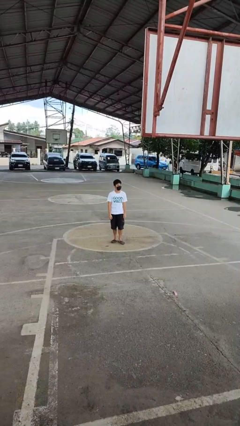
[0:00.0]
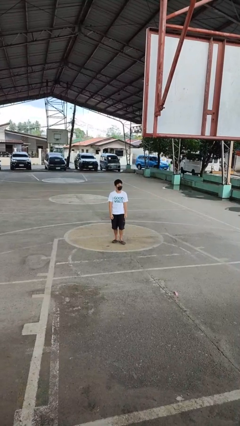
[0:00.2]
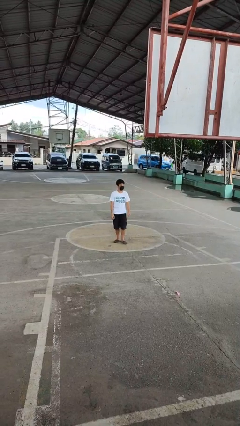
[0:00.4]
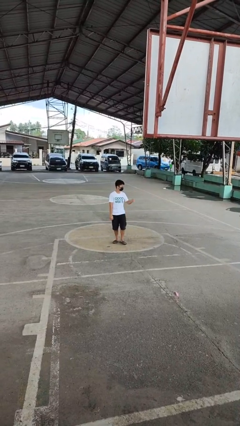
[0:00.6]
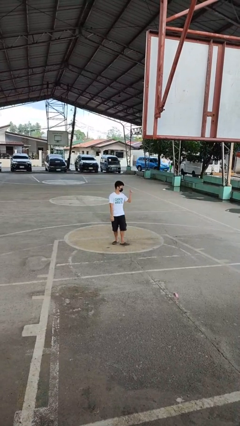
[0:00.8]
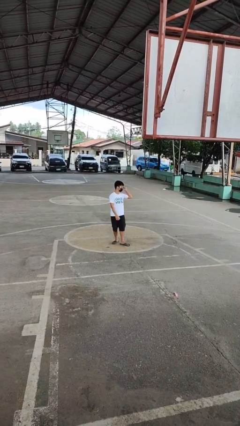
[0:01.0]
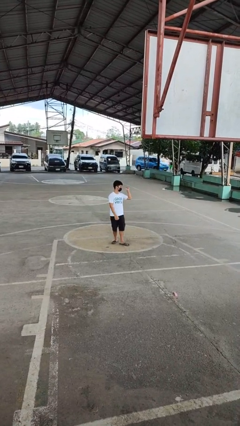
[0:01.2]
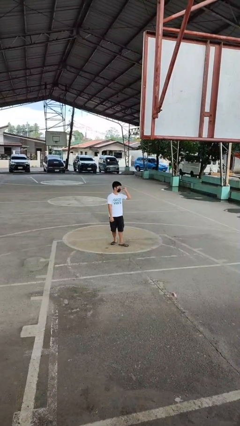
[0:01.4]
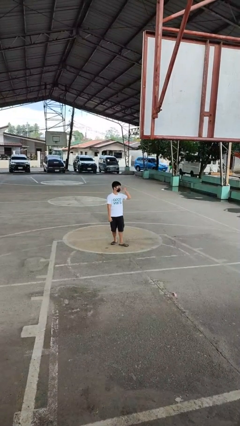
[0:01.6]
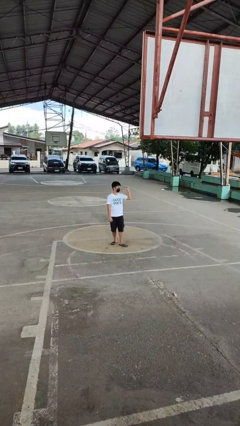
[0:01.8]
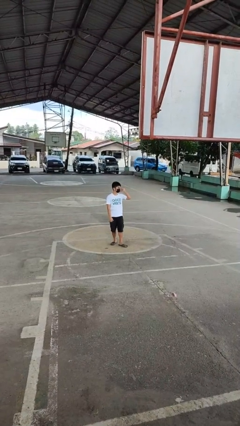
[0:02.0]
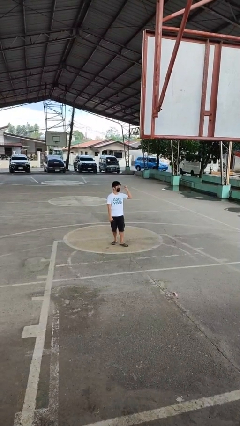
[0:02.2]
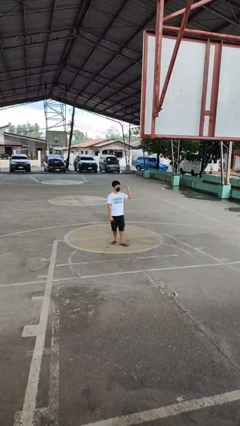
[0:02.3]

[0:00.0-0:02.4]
person gestures behind me

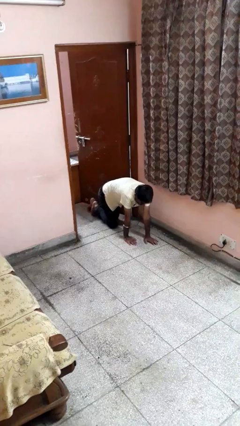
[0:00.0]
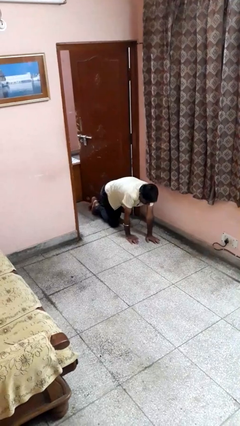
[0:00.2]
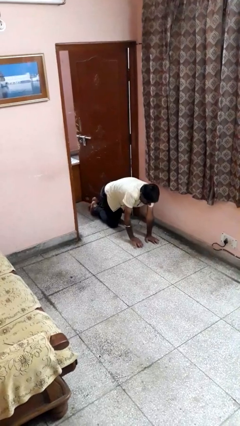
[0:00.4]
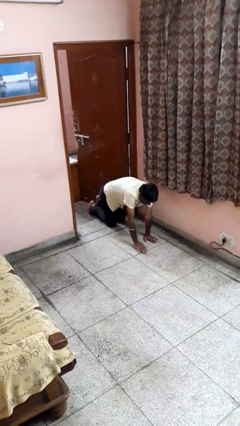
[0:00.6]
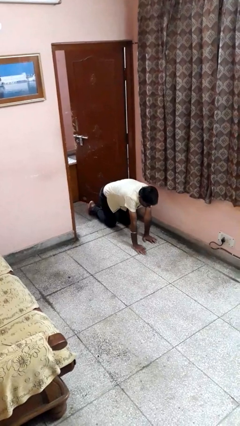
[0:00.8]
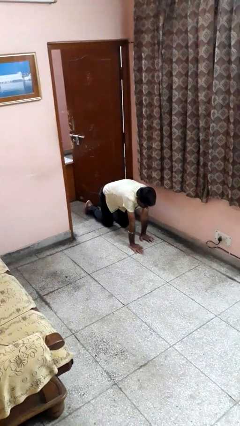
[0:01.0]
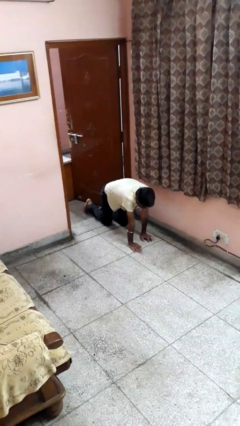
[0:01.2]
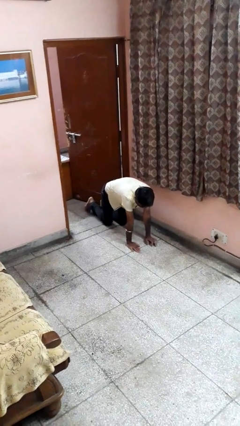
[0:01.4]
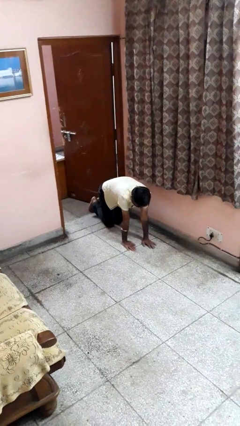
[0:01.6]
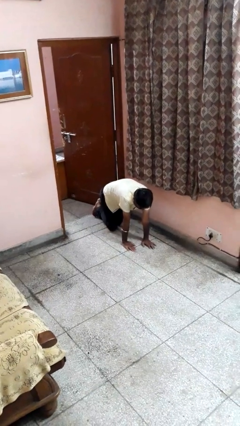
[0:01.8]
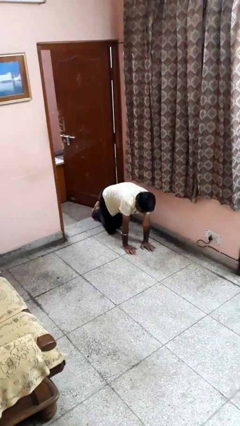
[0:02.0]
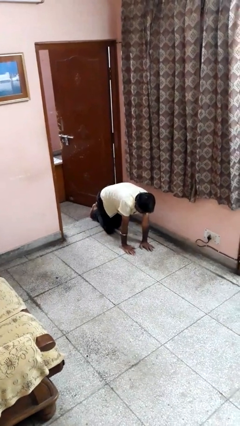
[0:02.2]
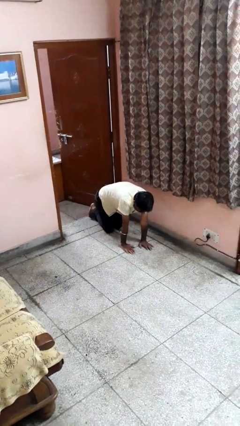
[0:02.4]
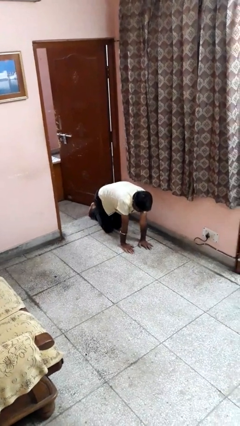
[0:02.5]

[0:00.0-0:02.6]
person crawls

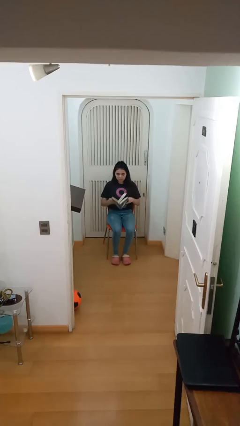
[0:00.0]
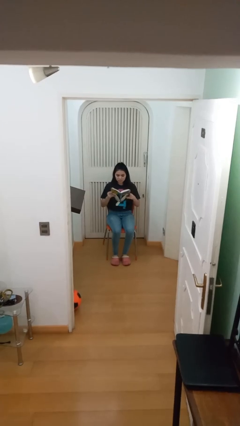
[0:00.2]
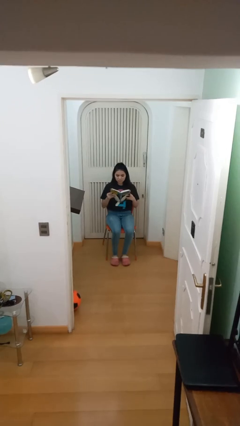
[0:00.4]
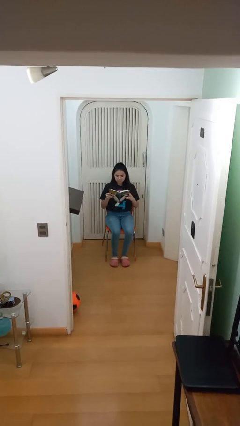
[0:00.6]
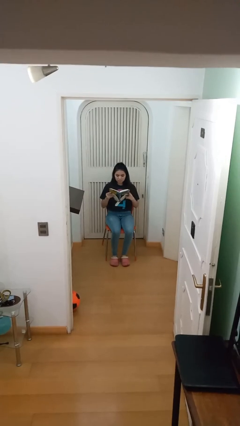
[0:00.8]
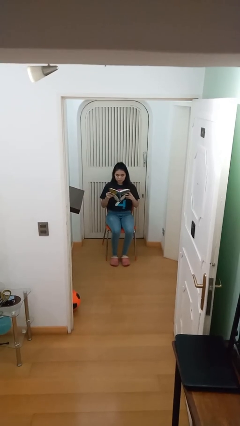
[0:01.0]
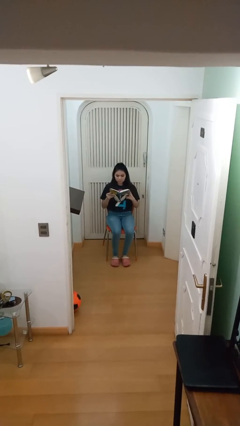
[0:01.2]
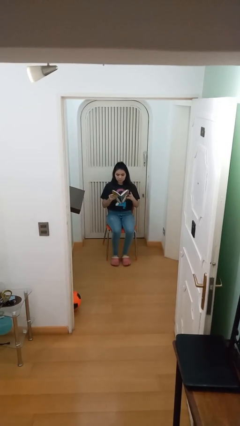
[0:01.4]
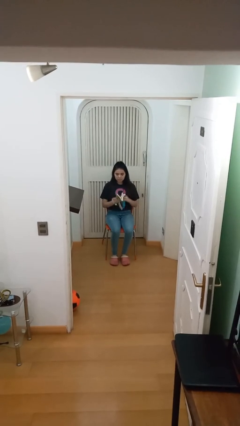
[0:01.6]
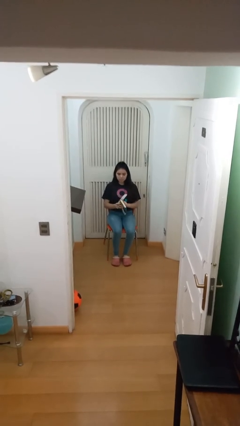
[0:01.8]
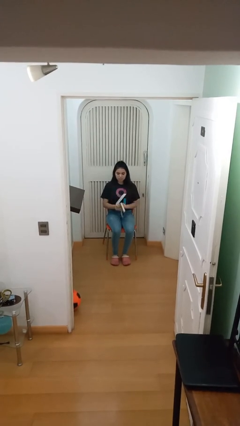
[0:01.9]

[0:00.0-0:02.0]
person reads document

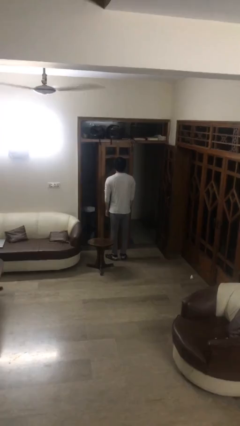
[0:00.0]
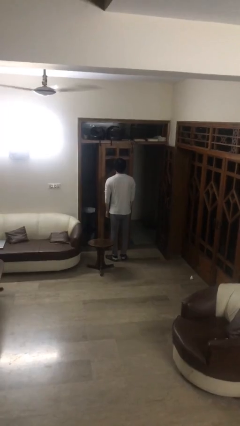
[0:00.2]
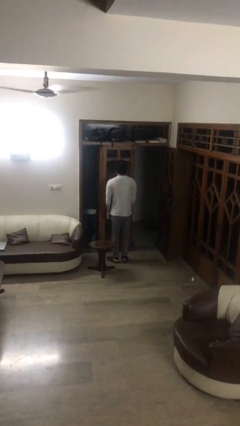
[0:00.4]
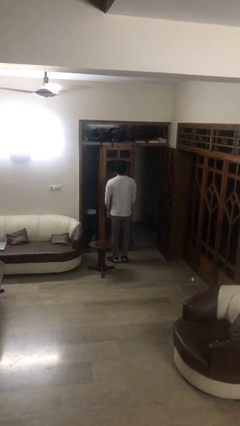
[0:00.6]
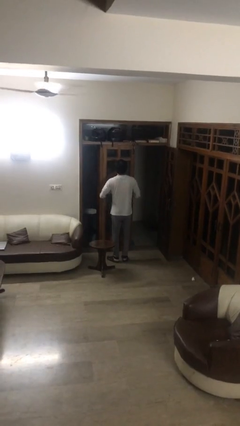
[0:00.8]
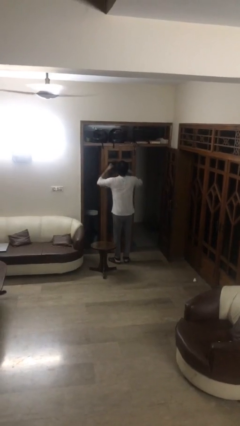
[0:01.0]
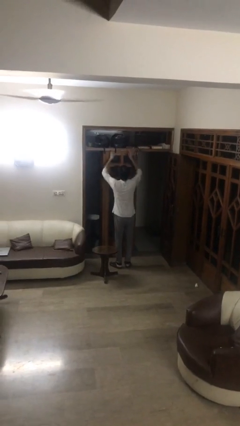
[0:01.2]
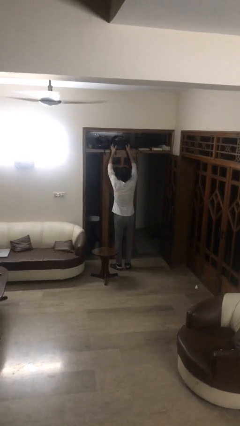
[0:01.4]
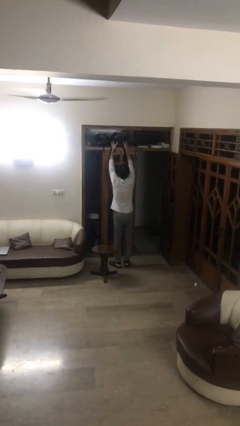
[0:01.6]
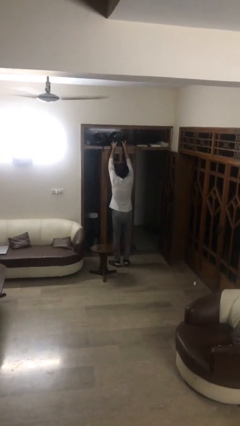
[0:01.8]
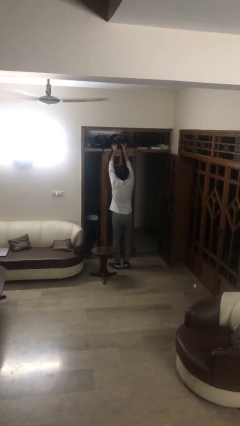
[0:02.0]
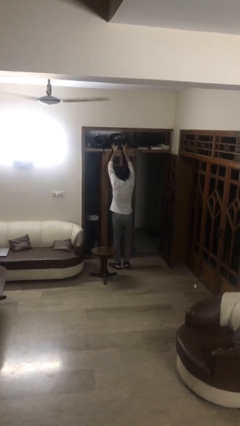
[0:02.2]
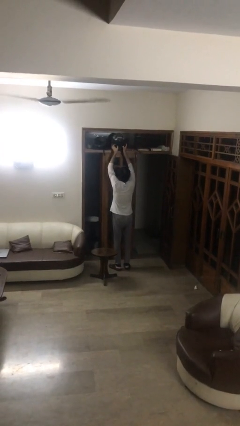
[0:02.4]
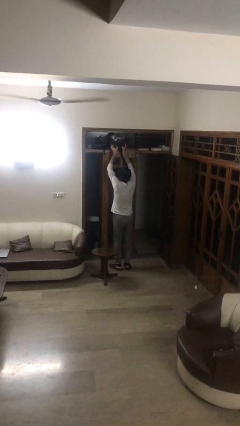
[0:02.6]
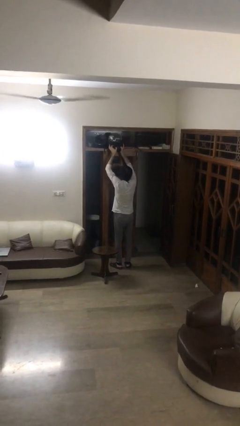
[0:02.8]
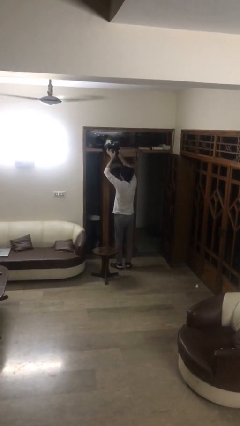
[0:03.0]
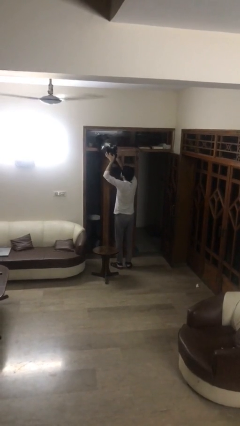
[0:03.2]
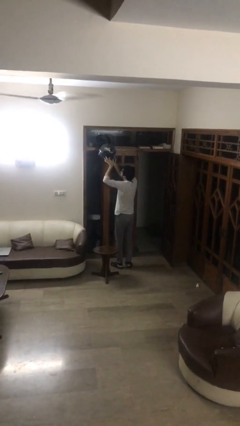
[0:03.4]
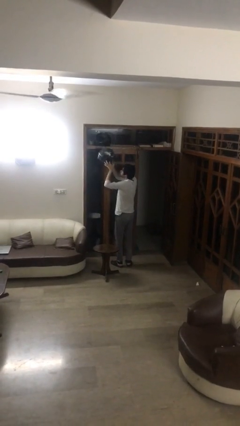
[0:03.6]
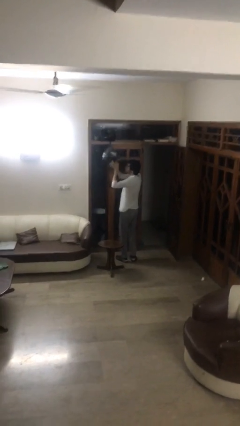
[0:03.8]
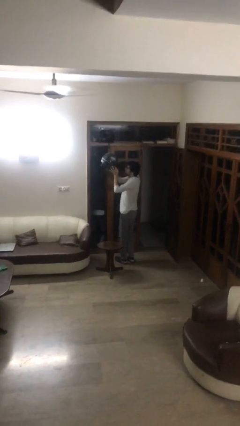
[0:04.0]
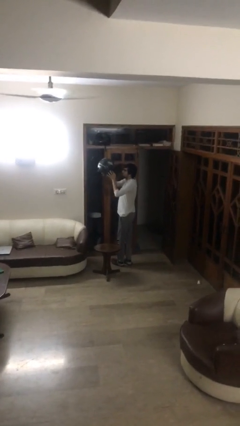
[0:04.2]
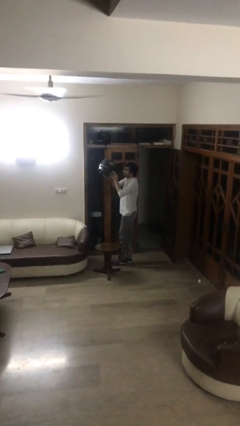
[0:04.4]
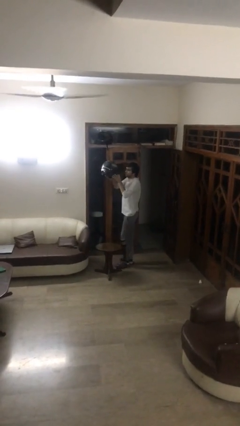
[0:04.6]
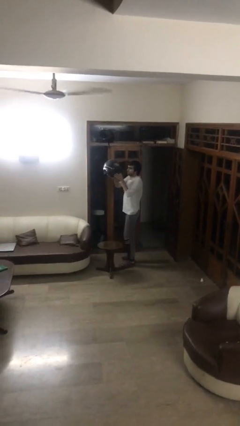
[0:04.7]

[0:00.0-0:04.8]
person picks up object from shelf

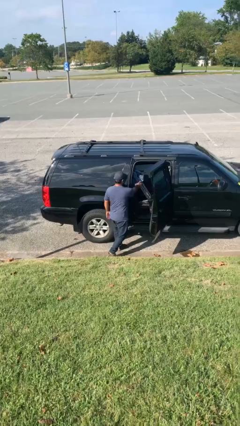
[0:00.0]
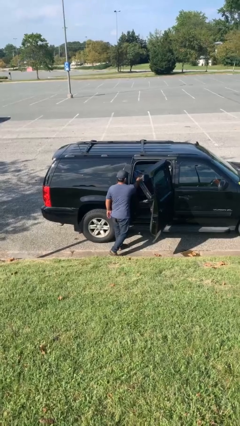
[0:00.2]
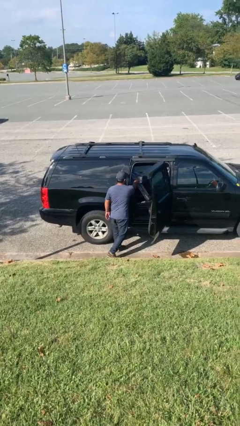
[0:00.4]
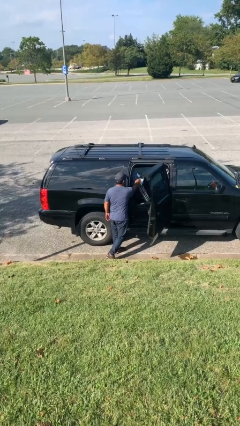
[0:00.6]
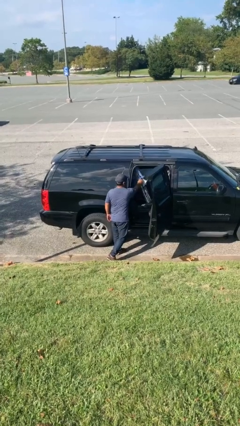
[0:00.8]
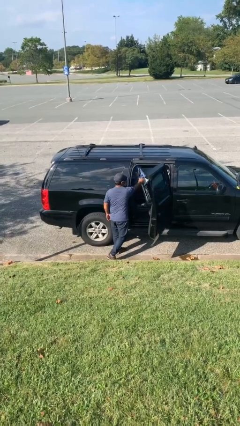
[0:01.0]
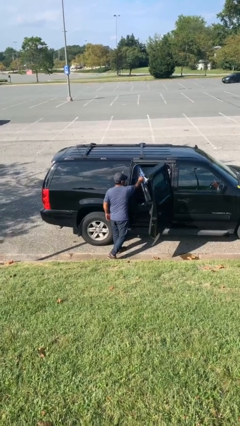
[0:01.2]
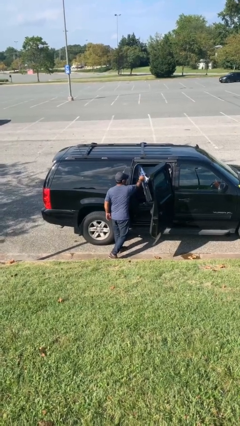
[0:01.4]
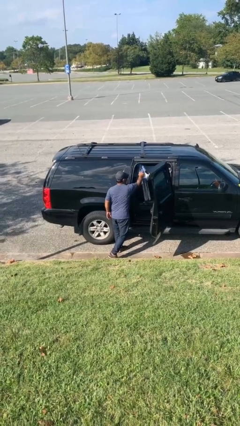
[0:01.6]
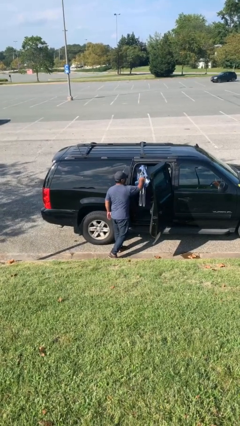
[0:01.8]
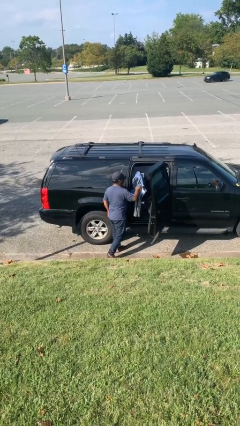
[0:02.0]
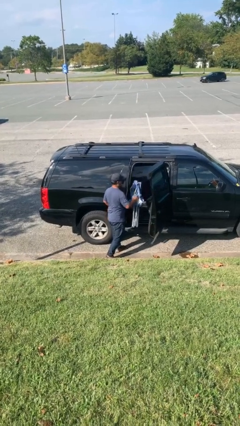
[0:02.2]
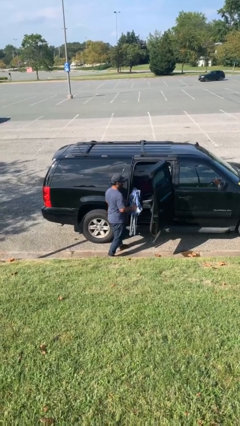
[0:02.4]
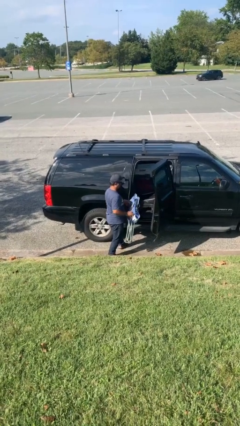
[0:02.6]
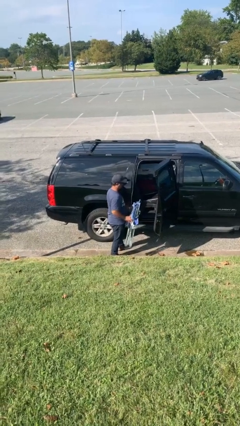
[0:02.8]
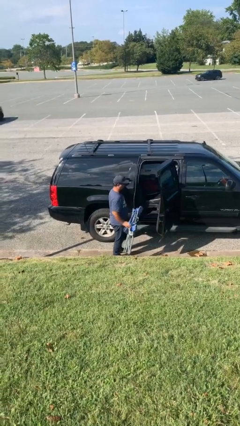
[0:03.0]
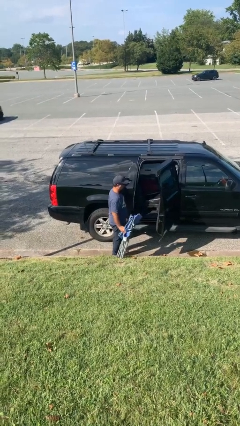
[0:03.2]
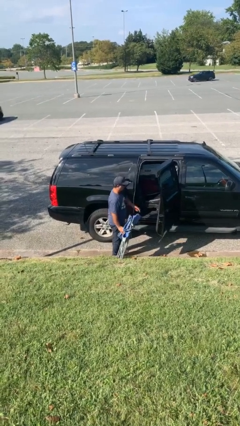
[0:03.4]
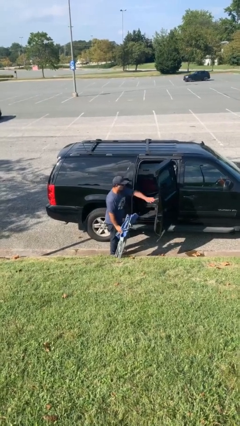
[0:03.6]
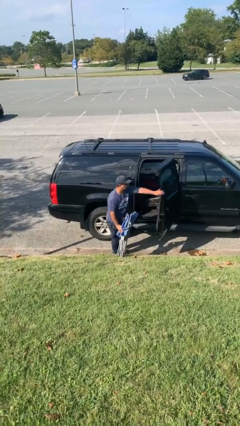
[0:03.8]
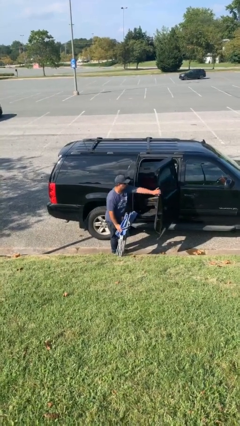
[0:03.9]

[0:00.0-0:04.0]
person unloads car

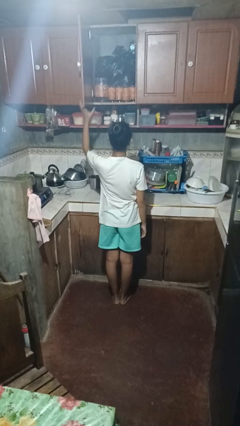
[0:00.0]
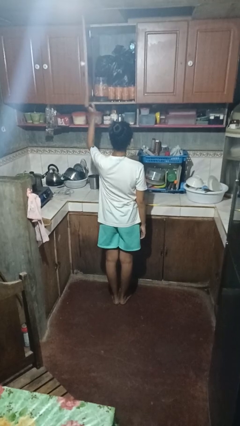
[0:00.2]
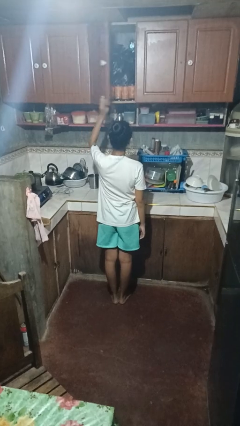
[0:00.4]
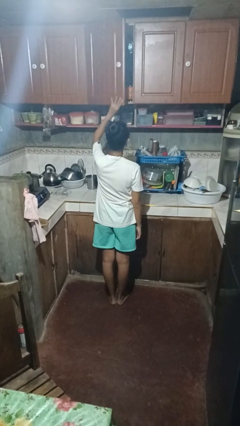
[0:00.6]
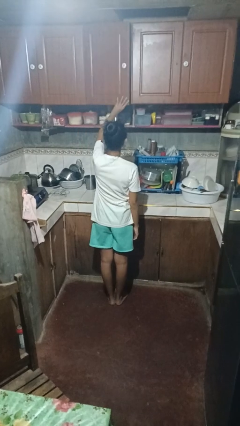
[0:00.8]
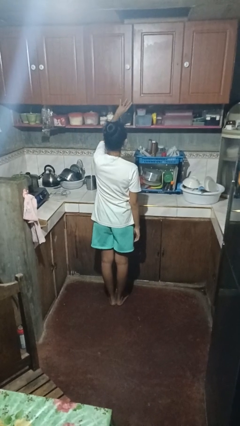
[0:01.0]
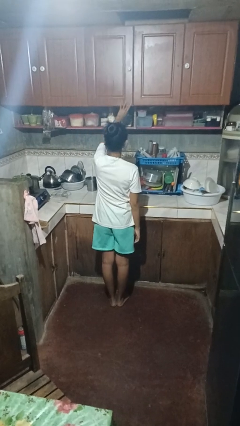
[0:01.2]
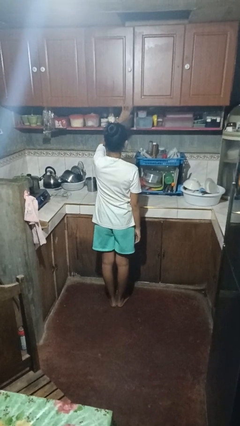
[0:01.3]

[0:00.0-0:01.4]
person closes cabinet

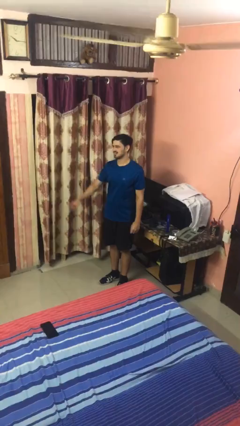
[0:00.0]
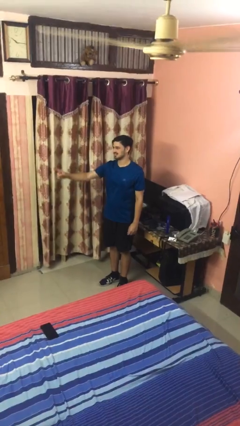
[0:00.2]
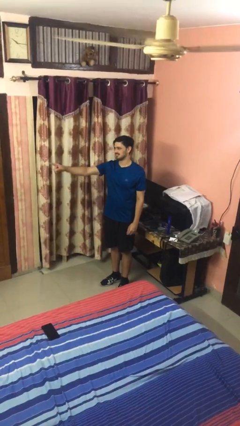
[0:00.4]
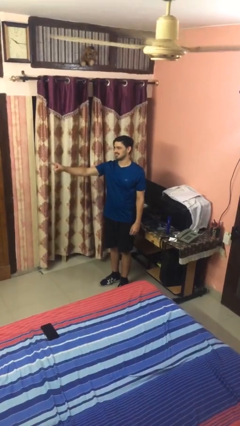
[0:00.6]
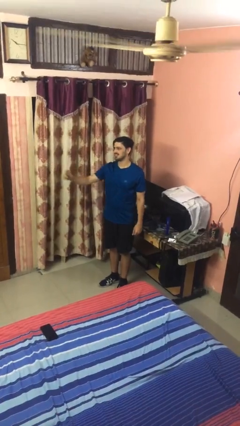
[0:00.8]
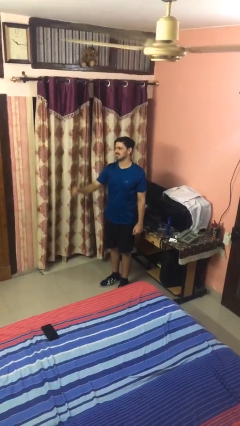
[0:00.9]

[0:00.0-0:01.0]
person points at person
